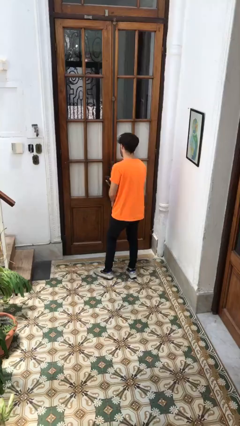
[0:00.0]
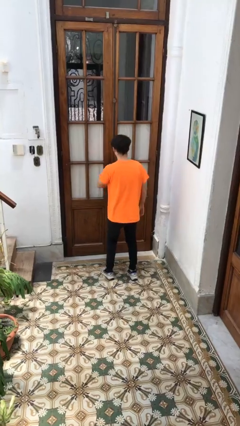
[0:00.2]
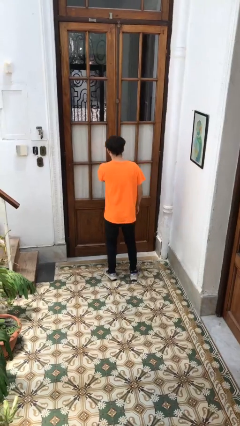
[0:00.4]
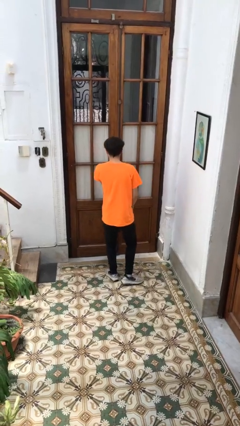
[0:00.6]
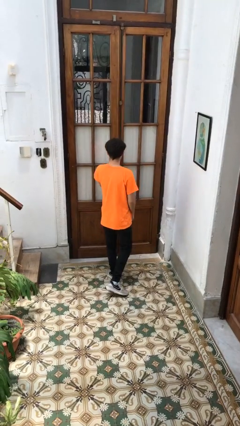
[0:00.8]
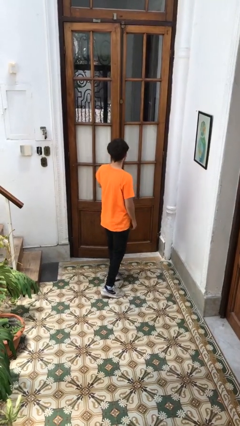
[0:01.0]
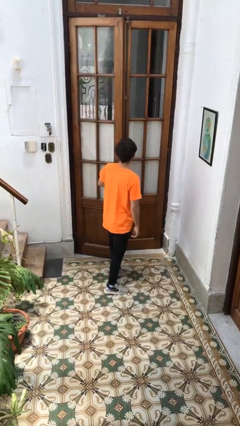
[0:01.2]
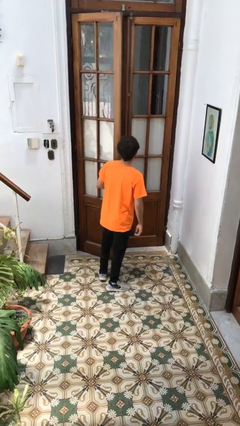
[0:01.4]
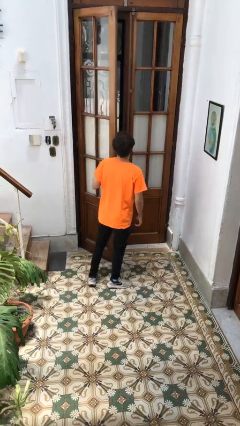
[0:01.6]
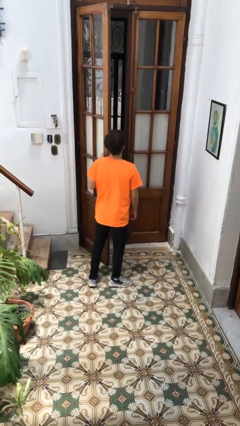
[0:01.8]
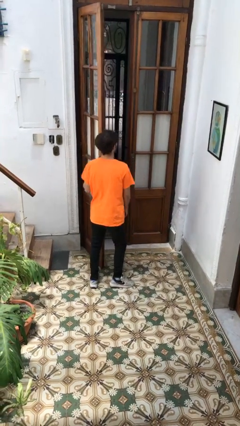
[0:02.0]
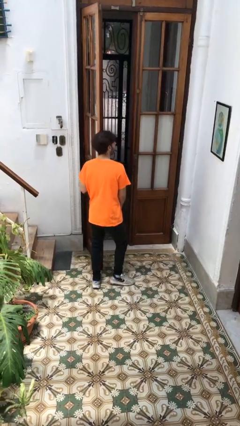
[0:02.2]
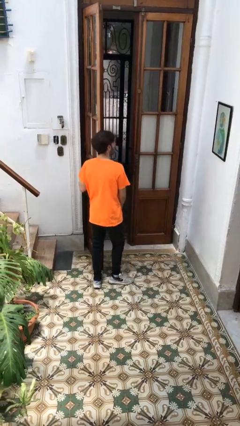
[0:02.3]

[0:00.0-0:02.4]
person opens facility door

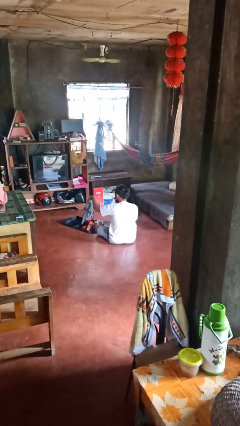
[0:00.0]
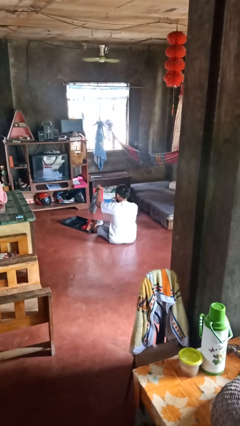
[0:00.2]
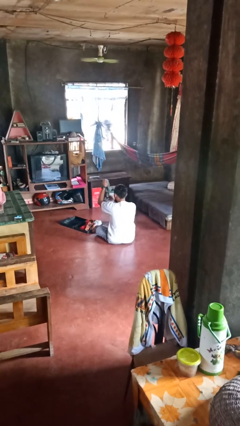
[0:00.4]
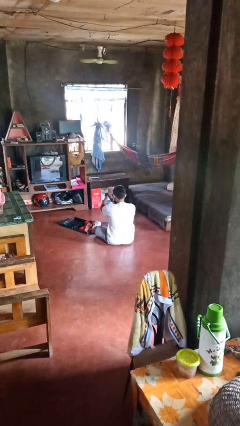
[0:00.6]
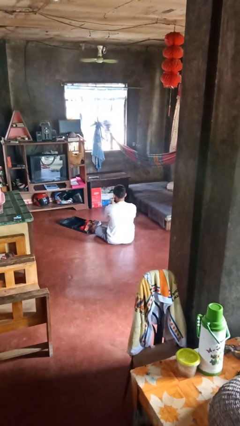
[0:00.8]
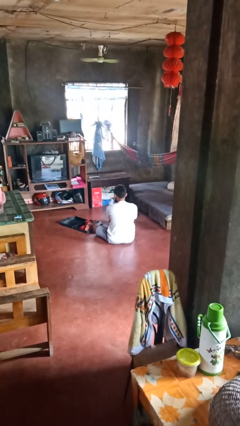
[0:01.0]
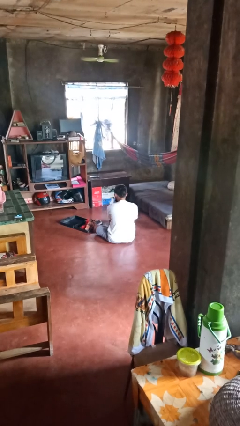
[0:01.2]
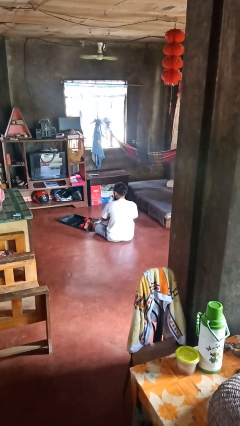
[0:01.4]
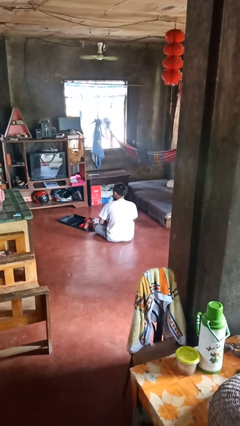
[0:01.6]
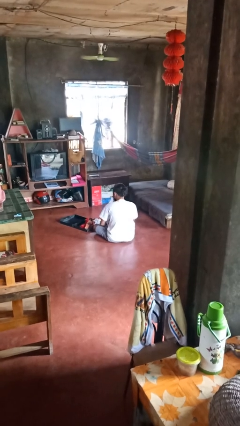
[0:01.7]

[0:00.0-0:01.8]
person unloads clothes from suitcase

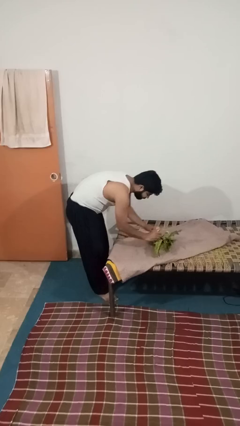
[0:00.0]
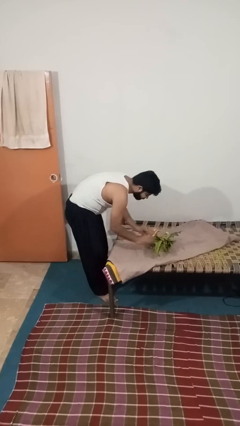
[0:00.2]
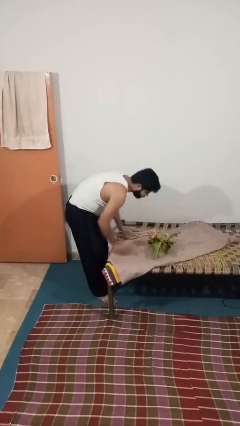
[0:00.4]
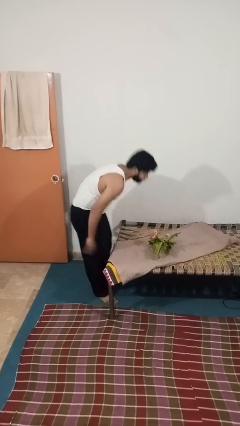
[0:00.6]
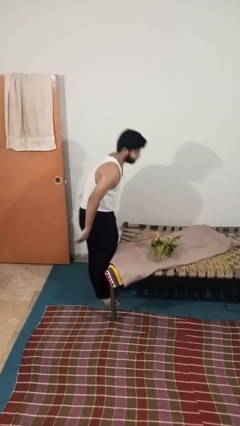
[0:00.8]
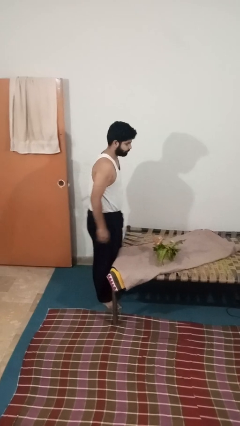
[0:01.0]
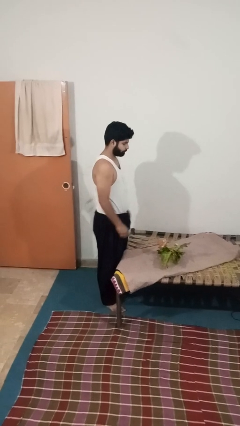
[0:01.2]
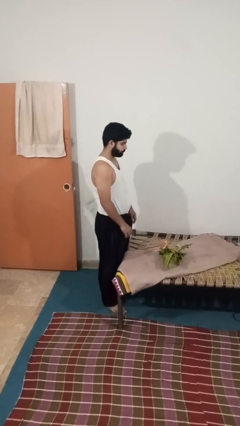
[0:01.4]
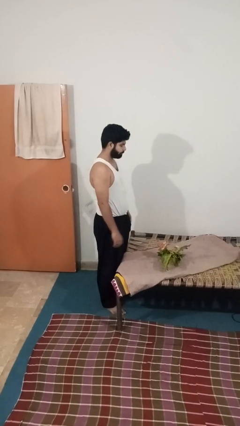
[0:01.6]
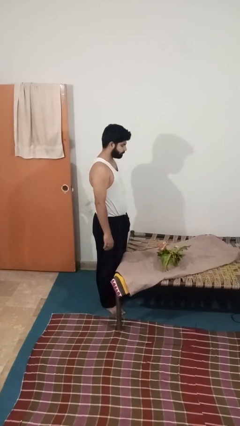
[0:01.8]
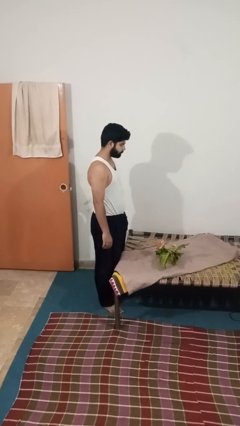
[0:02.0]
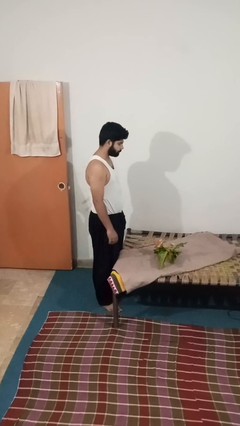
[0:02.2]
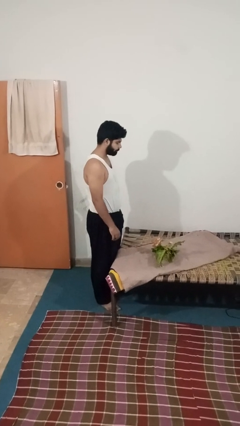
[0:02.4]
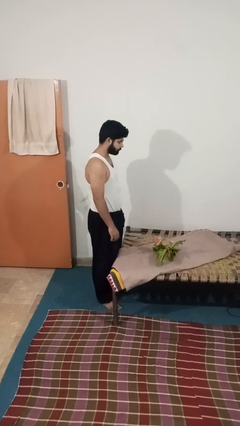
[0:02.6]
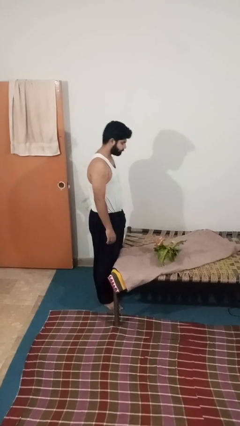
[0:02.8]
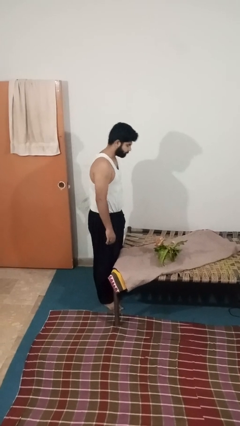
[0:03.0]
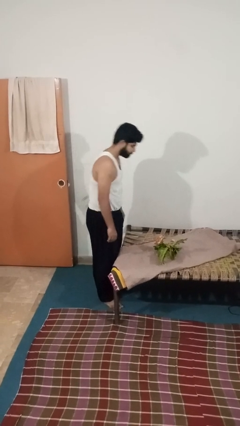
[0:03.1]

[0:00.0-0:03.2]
person climbs on chair

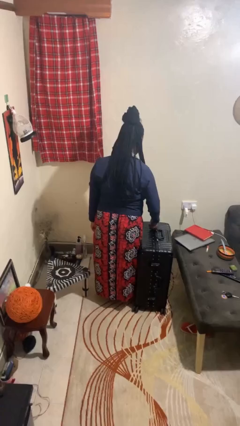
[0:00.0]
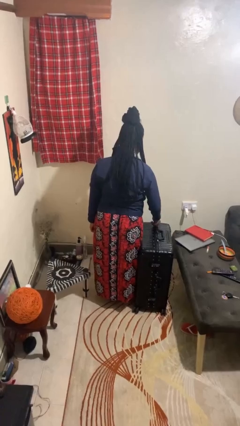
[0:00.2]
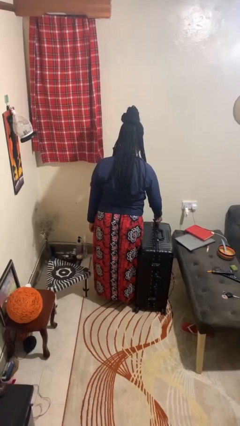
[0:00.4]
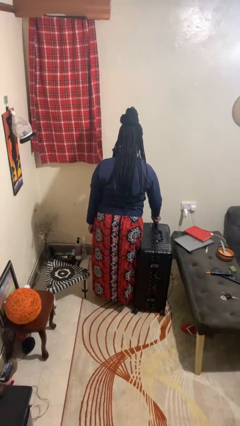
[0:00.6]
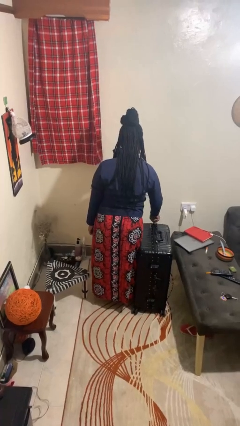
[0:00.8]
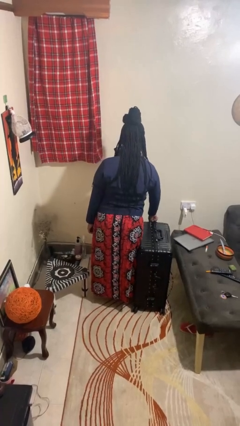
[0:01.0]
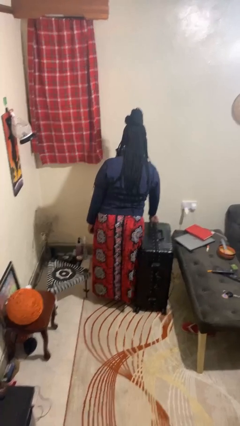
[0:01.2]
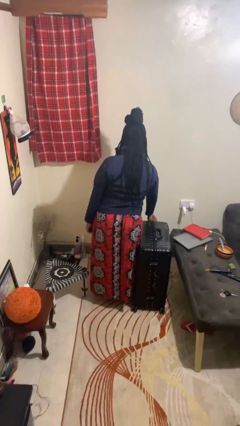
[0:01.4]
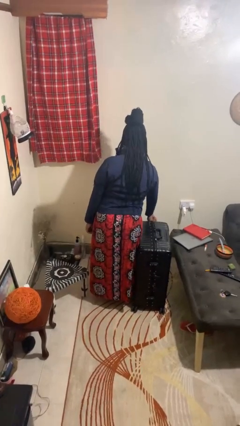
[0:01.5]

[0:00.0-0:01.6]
person closes suitcase

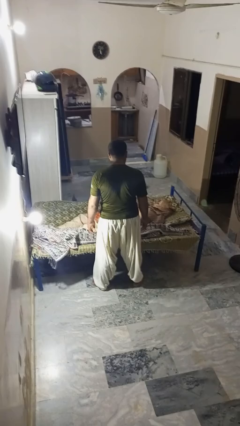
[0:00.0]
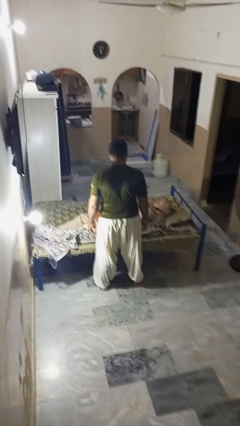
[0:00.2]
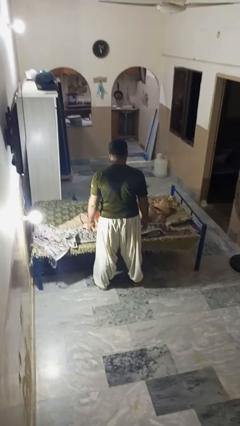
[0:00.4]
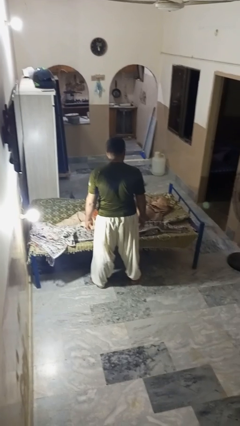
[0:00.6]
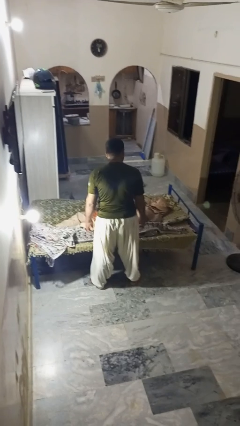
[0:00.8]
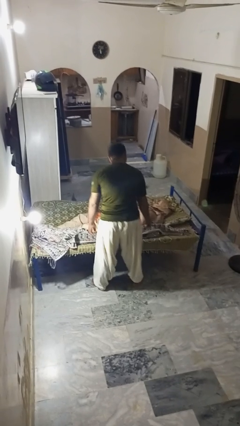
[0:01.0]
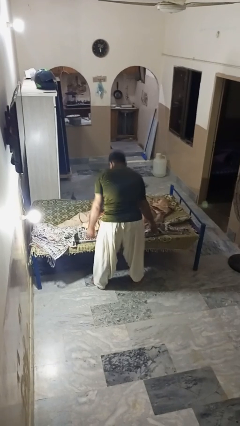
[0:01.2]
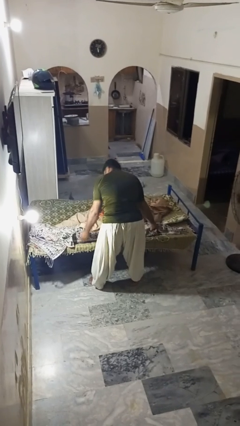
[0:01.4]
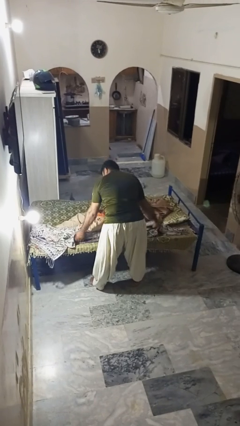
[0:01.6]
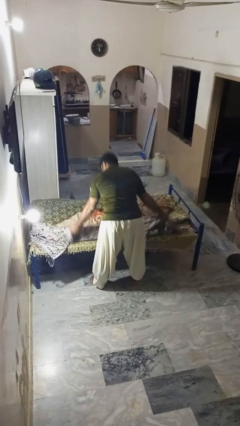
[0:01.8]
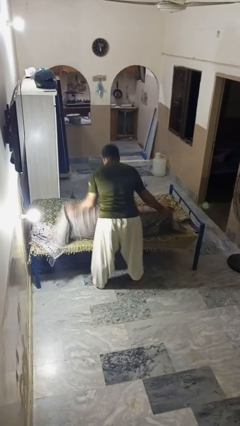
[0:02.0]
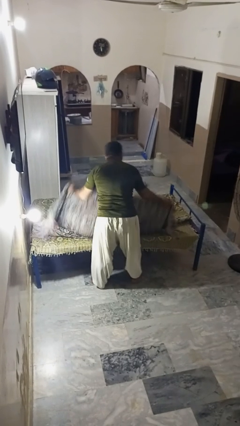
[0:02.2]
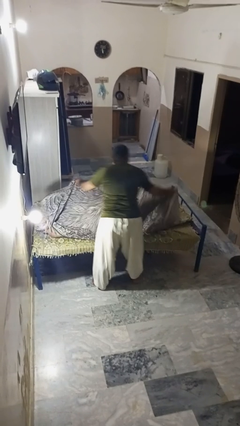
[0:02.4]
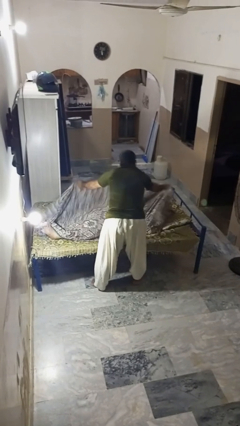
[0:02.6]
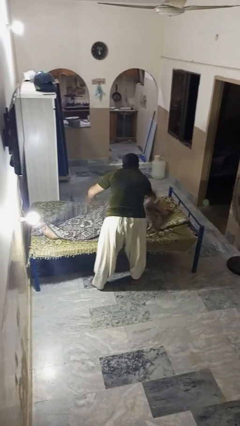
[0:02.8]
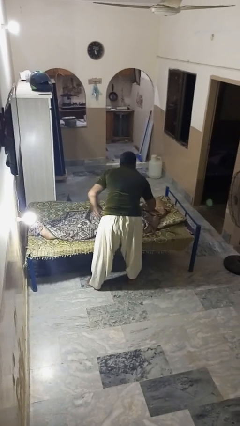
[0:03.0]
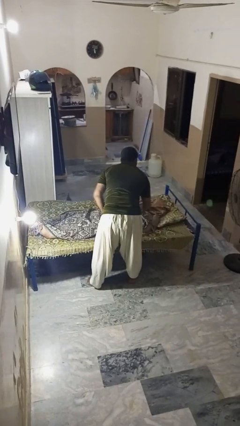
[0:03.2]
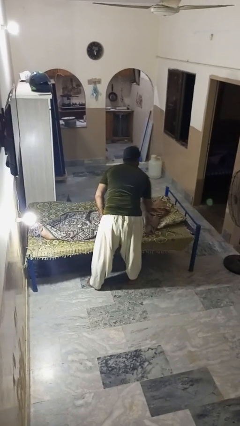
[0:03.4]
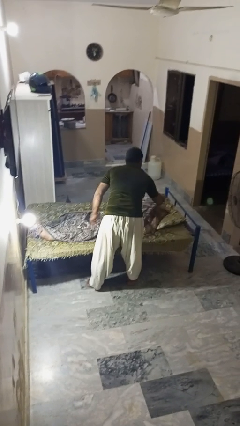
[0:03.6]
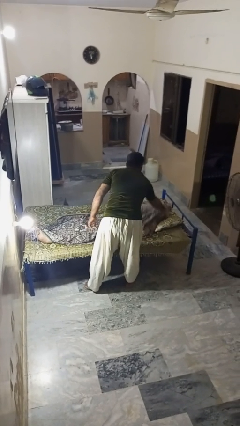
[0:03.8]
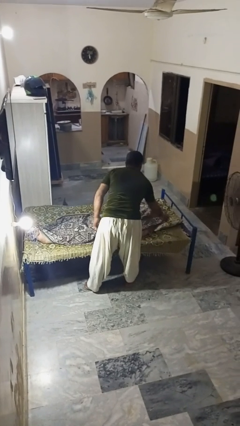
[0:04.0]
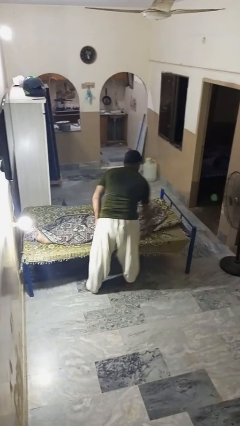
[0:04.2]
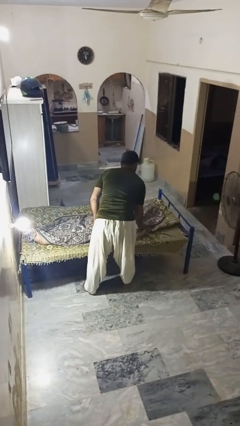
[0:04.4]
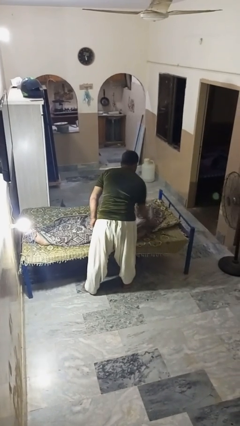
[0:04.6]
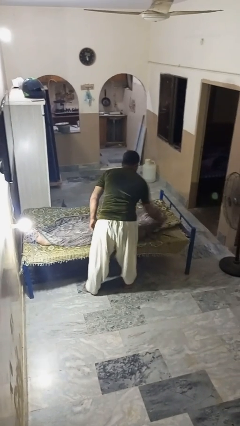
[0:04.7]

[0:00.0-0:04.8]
person covers friend with blanket

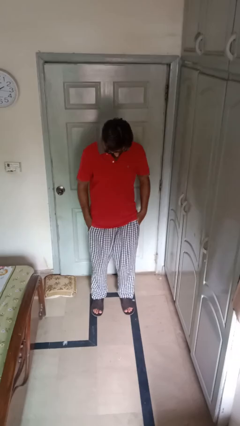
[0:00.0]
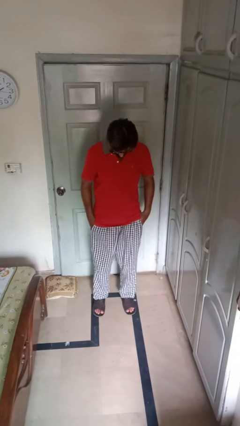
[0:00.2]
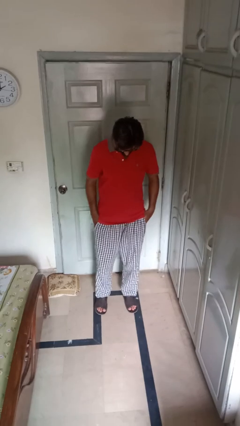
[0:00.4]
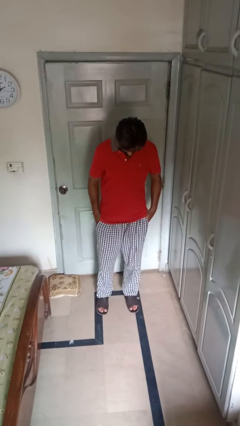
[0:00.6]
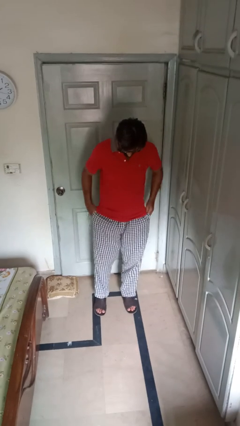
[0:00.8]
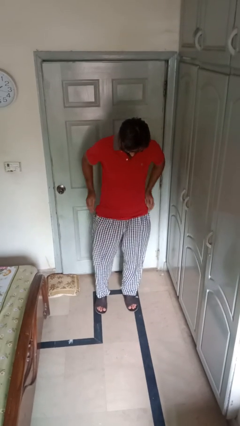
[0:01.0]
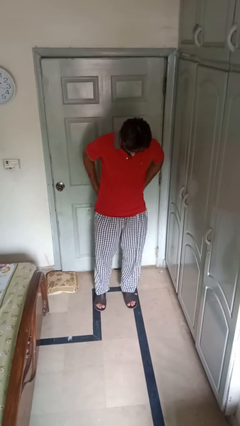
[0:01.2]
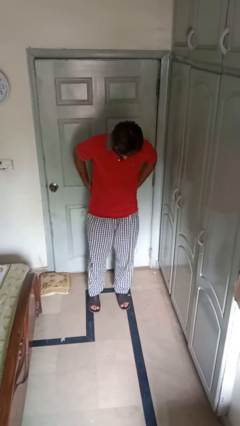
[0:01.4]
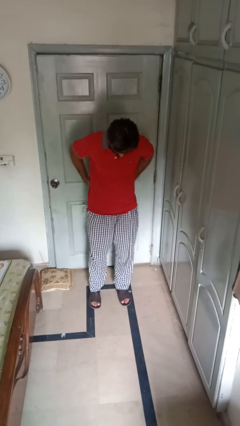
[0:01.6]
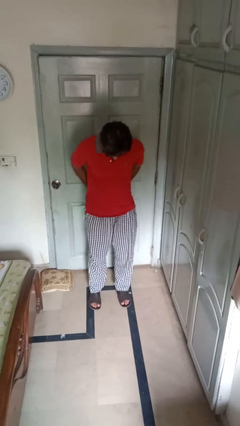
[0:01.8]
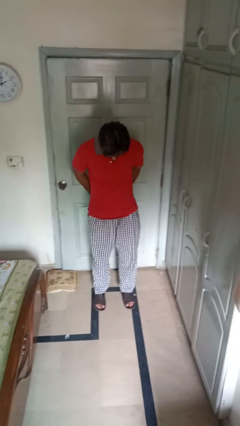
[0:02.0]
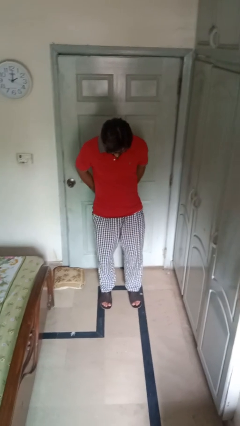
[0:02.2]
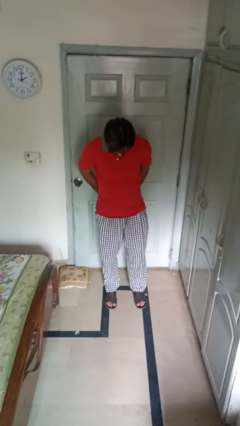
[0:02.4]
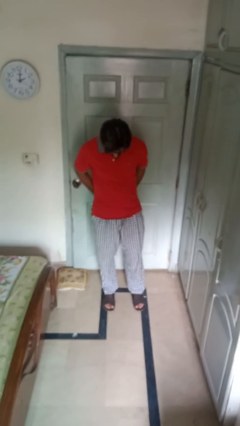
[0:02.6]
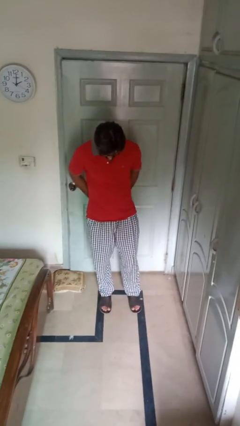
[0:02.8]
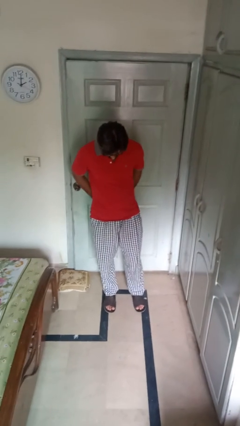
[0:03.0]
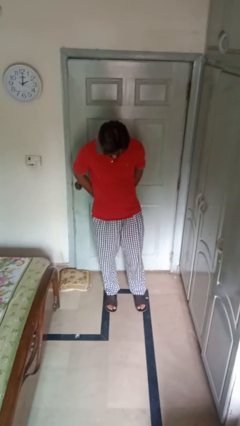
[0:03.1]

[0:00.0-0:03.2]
person puts hands in back pockets

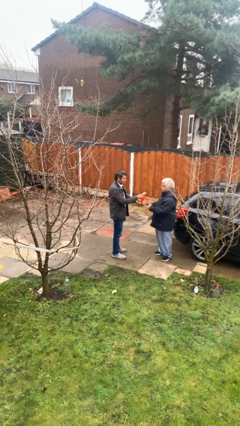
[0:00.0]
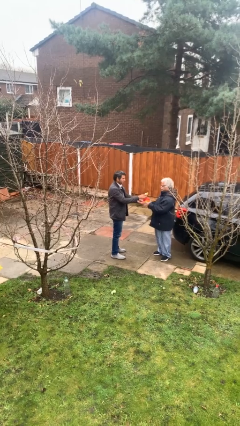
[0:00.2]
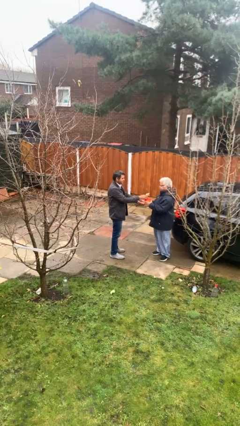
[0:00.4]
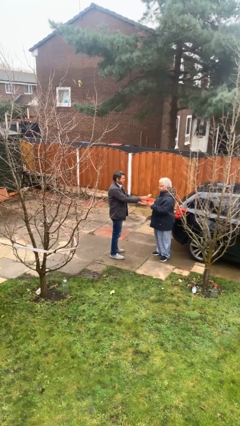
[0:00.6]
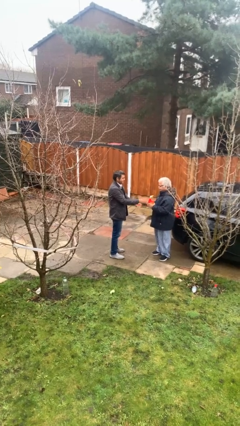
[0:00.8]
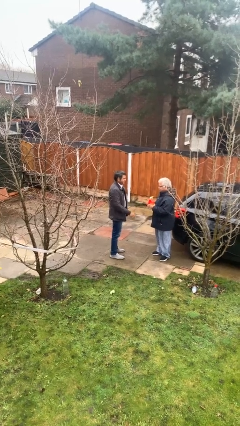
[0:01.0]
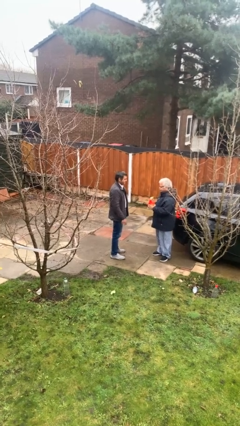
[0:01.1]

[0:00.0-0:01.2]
person transfers object to person
